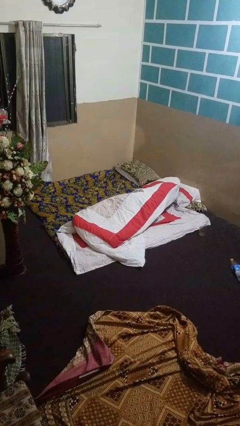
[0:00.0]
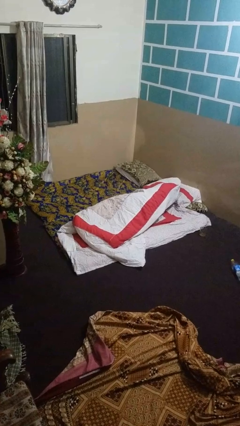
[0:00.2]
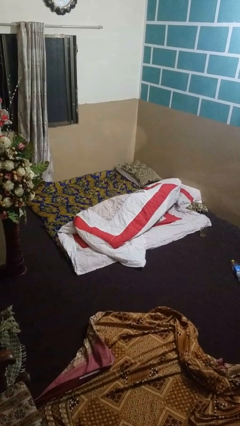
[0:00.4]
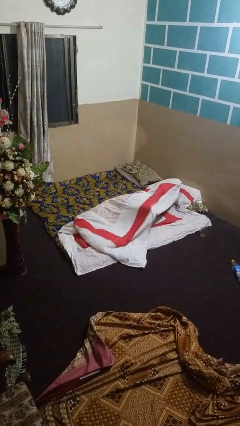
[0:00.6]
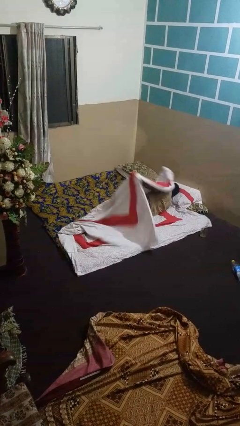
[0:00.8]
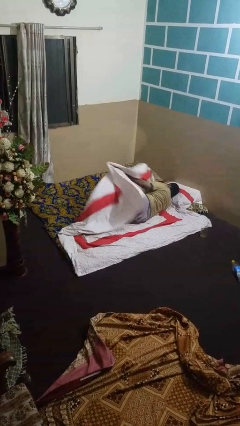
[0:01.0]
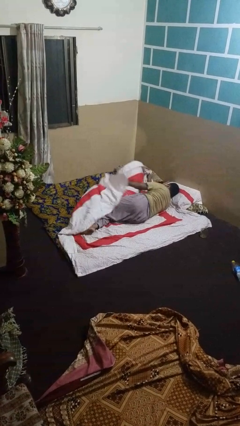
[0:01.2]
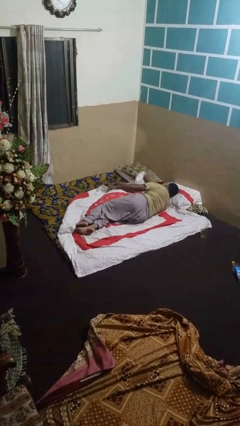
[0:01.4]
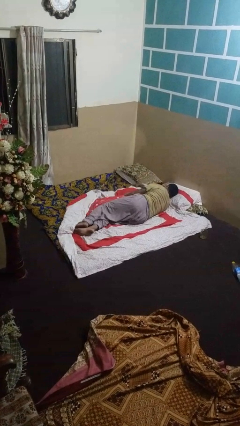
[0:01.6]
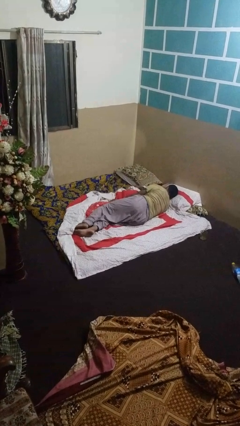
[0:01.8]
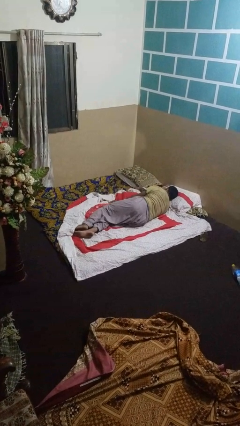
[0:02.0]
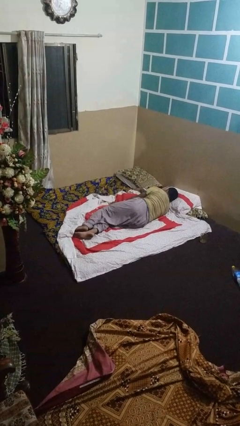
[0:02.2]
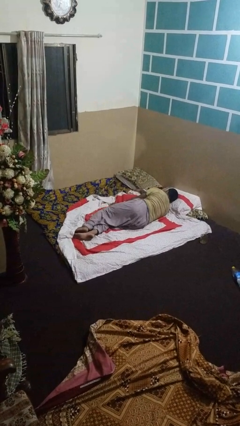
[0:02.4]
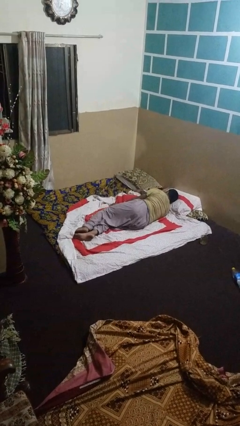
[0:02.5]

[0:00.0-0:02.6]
person uncovers with bedsheets

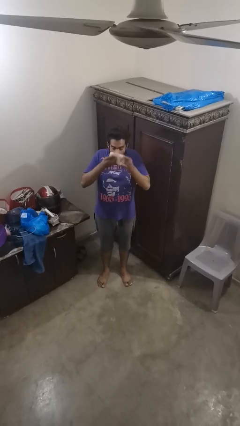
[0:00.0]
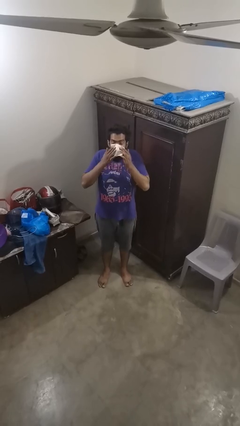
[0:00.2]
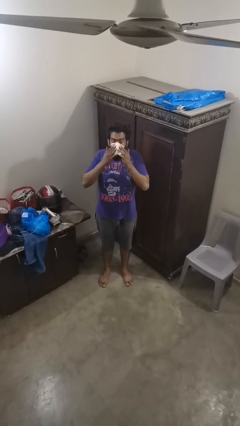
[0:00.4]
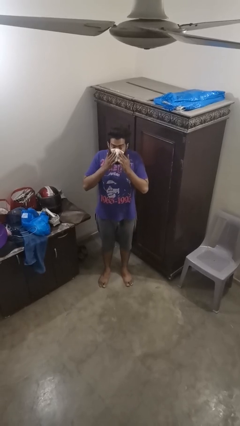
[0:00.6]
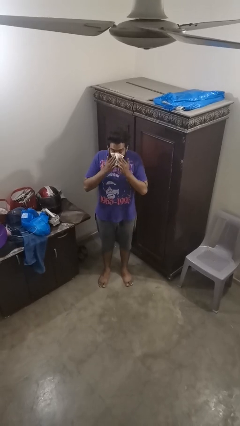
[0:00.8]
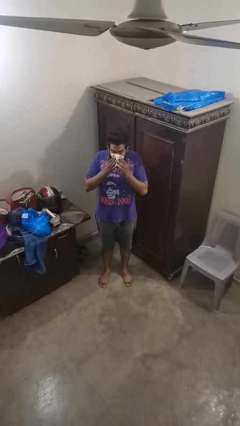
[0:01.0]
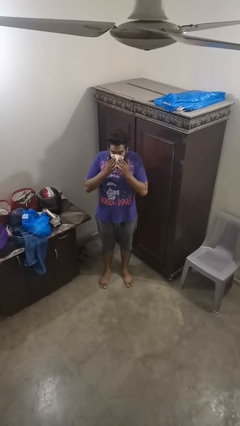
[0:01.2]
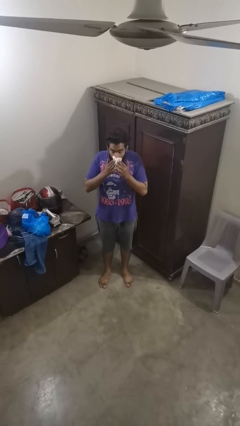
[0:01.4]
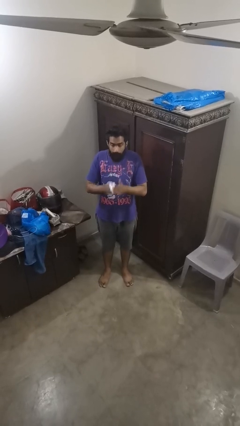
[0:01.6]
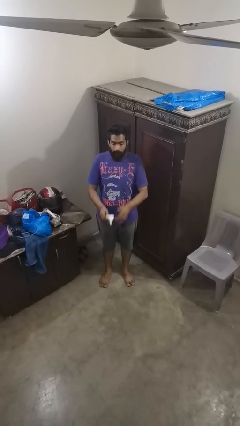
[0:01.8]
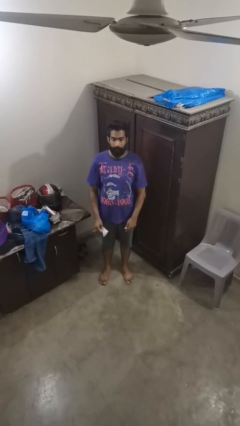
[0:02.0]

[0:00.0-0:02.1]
person blows nose

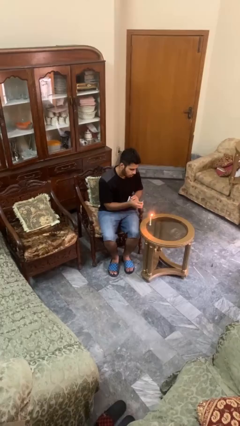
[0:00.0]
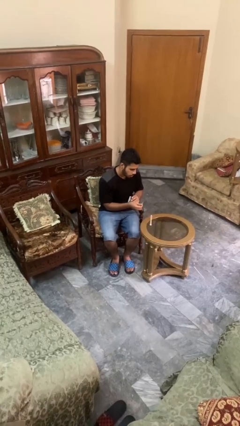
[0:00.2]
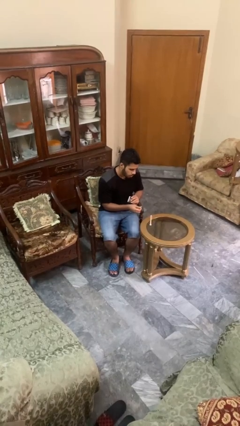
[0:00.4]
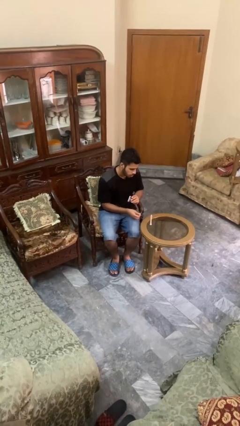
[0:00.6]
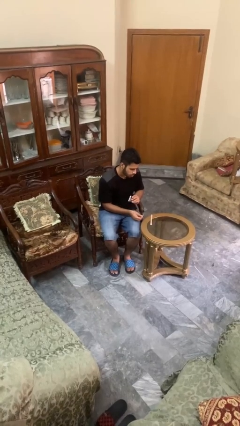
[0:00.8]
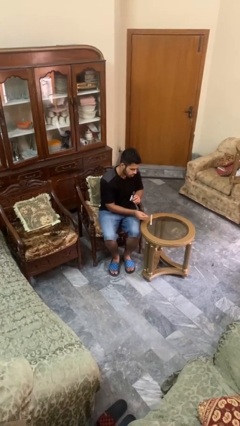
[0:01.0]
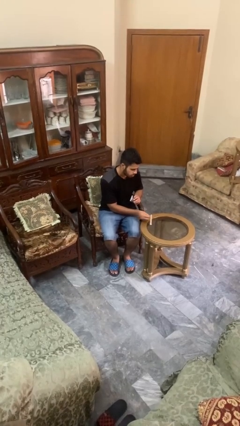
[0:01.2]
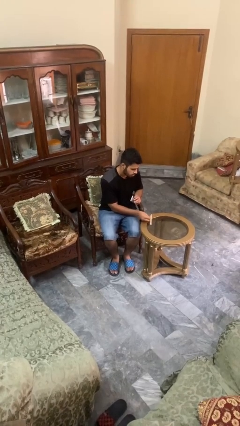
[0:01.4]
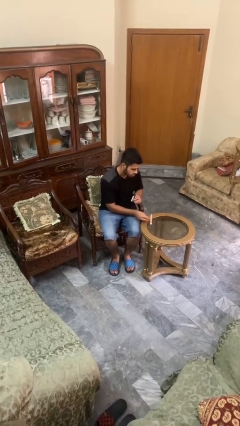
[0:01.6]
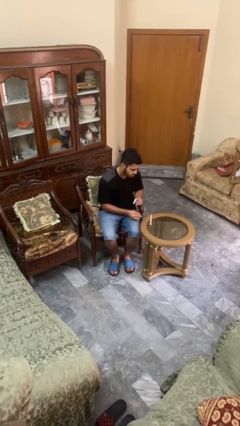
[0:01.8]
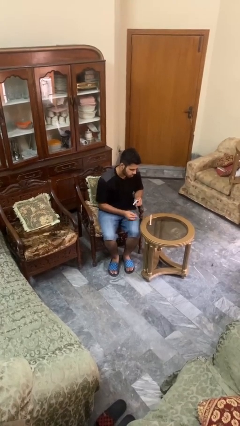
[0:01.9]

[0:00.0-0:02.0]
person extinguishes candle

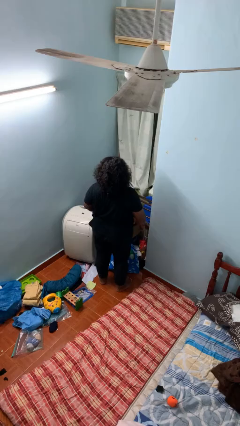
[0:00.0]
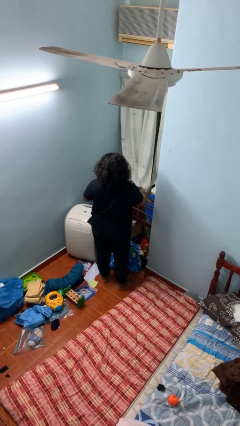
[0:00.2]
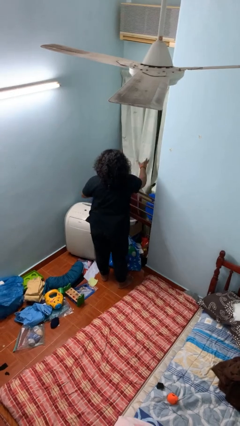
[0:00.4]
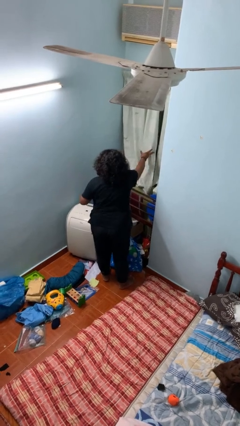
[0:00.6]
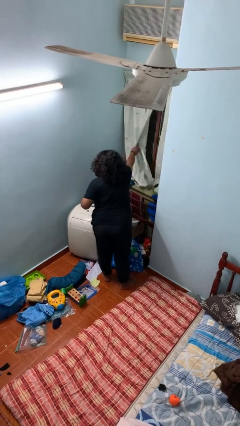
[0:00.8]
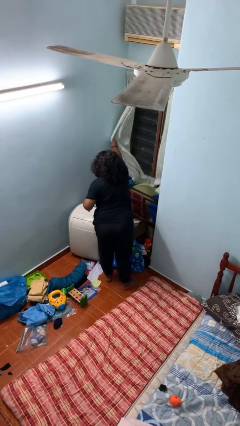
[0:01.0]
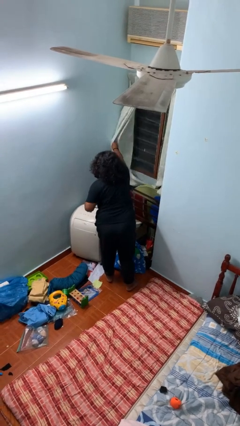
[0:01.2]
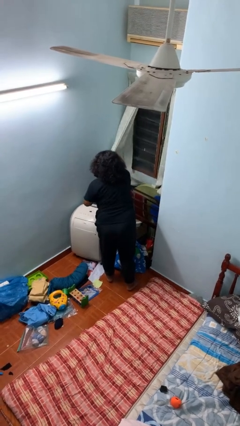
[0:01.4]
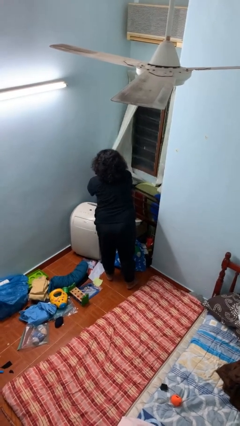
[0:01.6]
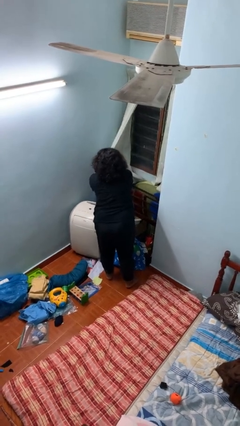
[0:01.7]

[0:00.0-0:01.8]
person opens curtains

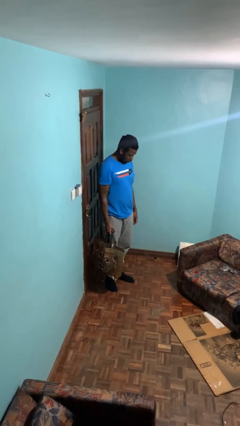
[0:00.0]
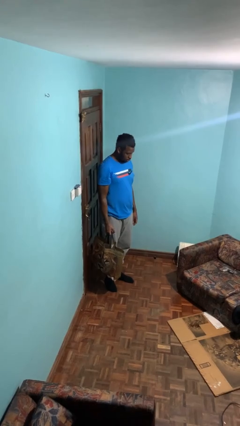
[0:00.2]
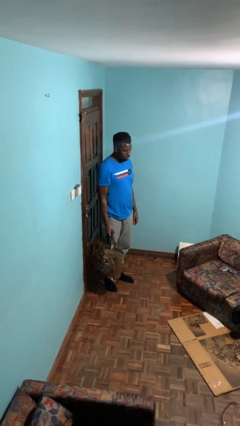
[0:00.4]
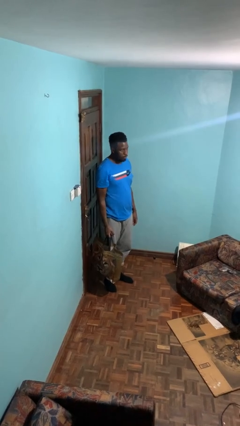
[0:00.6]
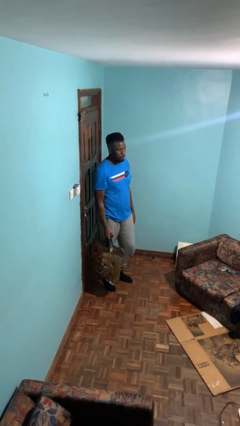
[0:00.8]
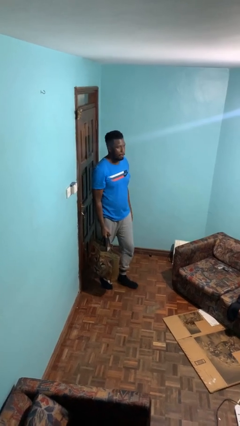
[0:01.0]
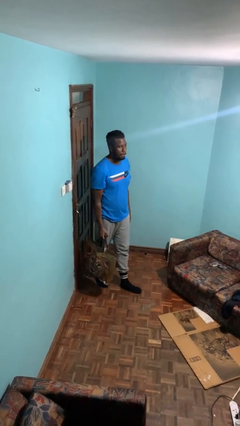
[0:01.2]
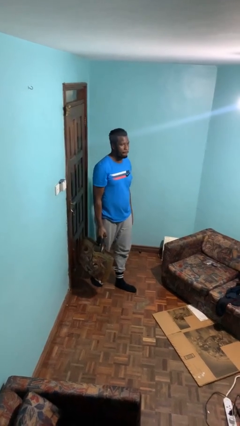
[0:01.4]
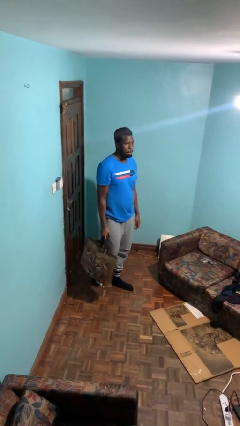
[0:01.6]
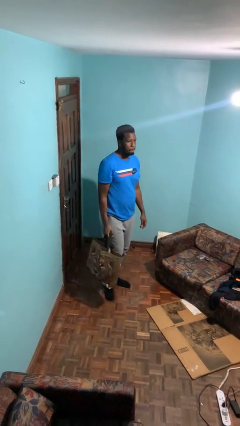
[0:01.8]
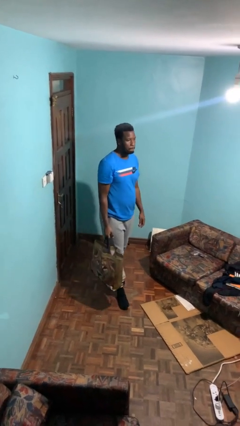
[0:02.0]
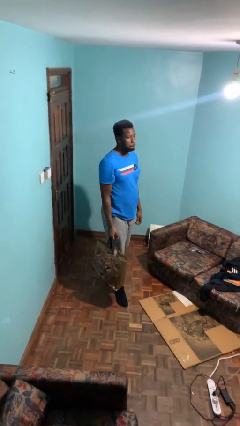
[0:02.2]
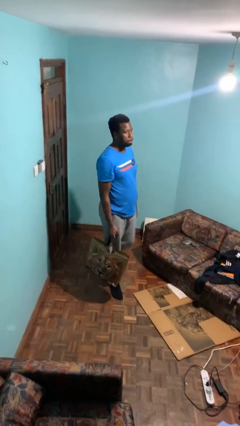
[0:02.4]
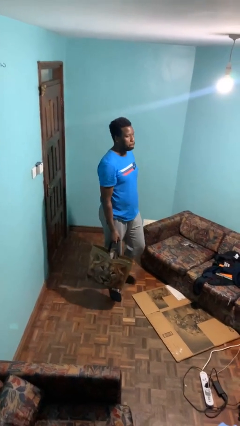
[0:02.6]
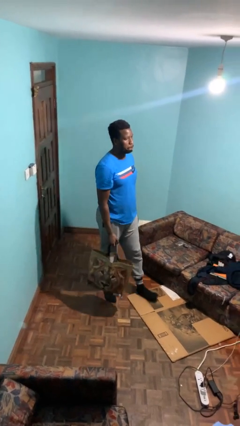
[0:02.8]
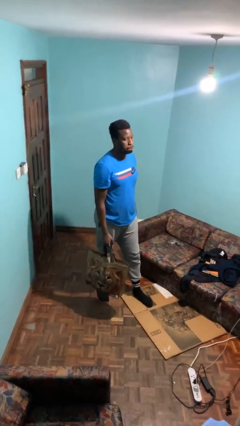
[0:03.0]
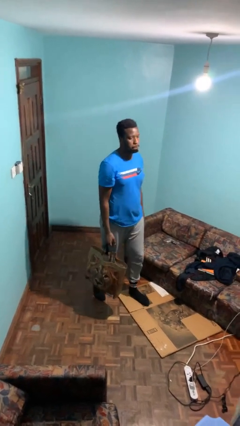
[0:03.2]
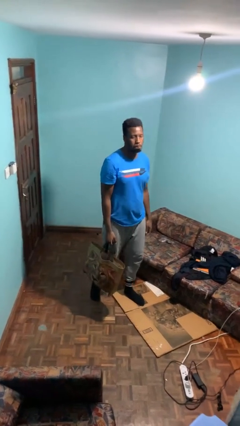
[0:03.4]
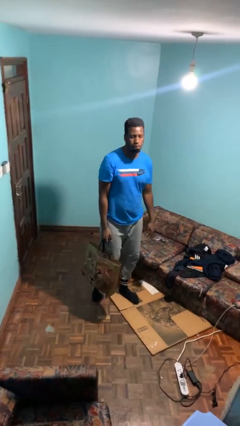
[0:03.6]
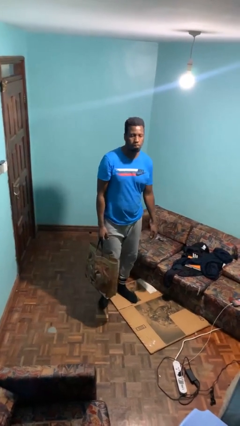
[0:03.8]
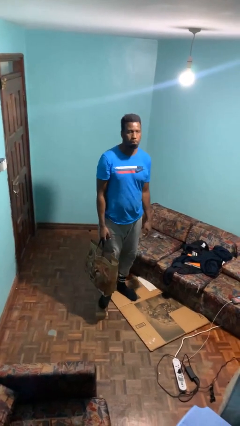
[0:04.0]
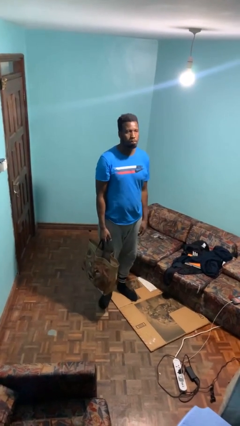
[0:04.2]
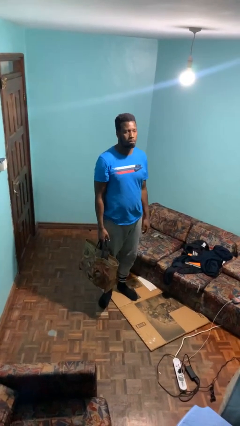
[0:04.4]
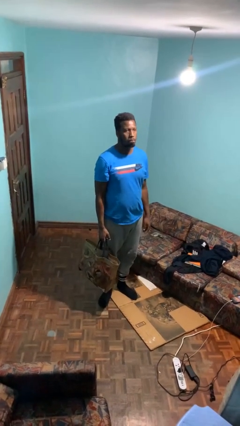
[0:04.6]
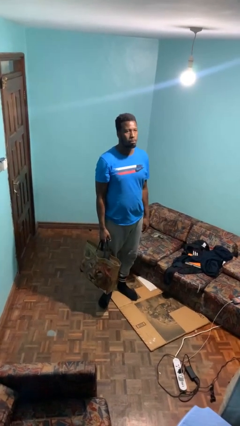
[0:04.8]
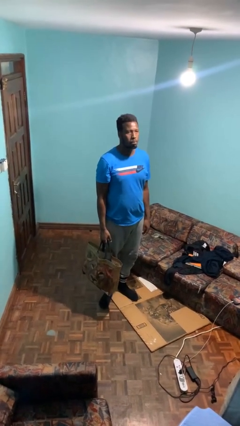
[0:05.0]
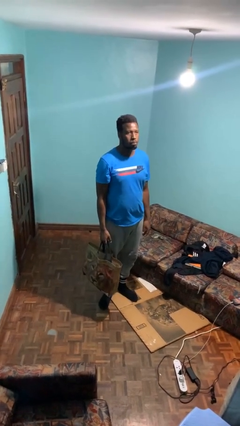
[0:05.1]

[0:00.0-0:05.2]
person carries groceries

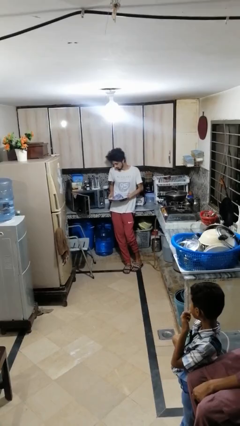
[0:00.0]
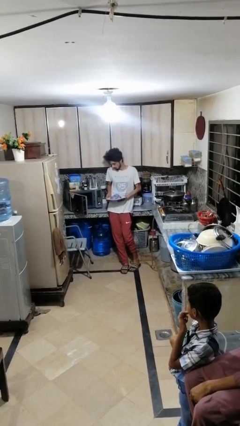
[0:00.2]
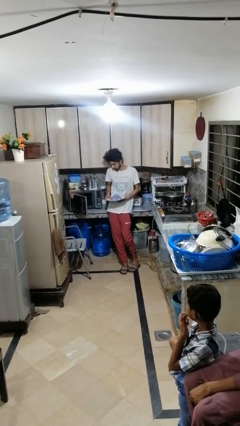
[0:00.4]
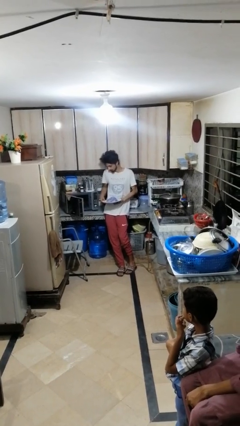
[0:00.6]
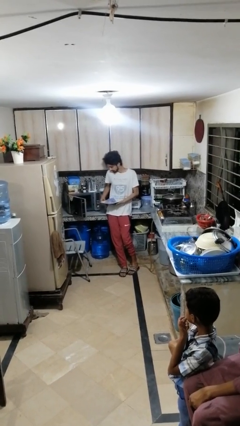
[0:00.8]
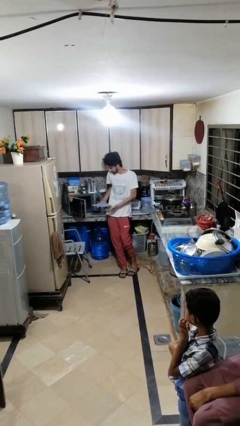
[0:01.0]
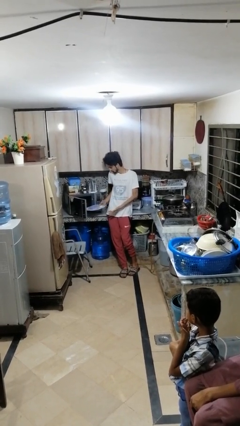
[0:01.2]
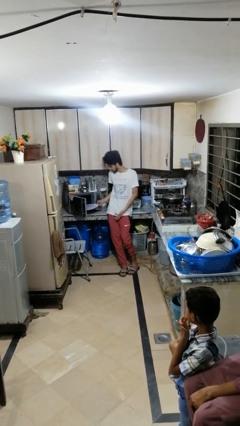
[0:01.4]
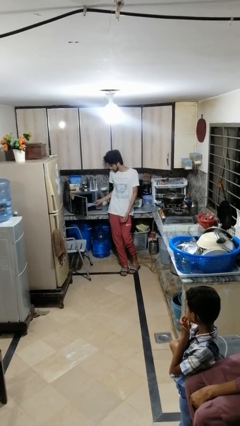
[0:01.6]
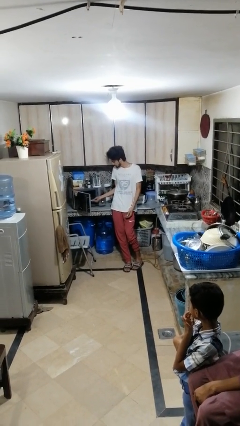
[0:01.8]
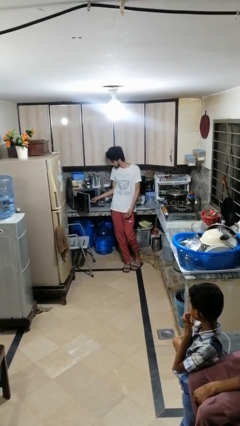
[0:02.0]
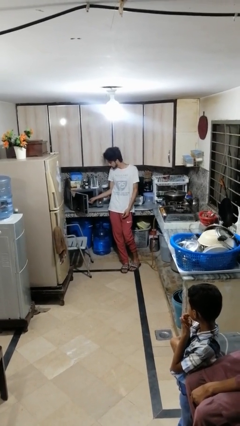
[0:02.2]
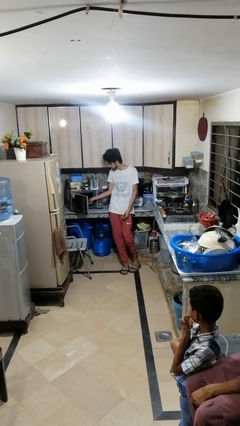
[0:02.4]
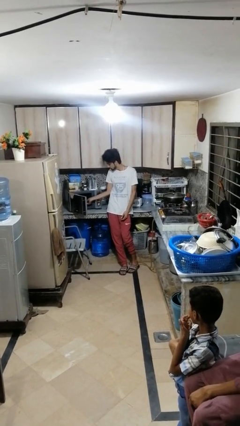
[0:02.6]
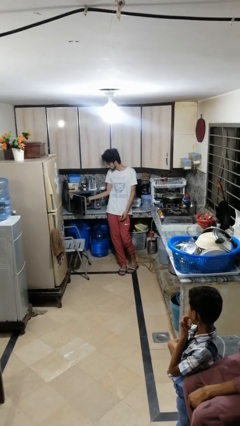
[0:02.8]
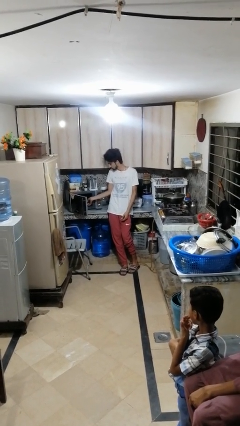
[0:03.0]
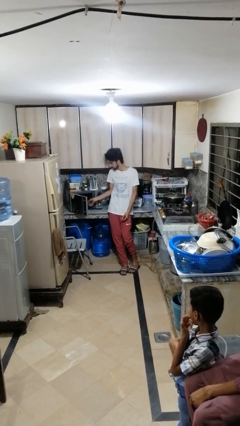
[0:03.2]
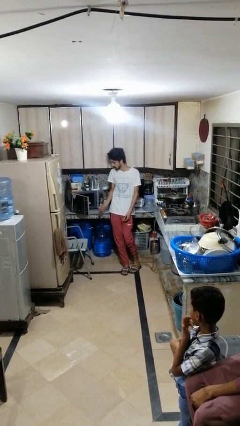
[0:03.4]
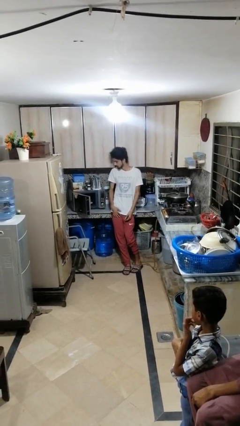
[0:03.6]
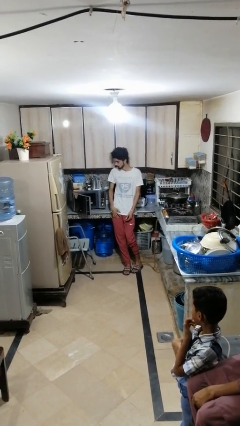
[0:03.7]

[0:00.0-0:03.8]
person puts object into oven
